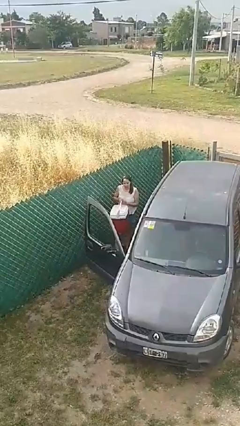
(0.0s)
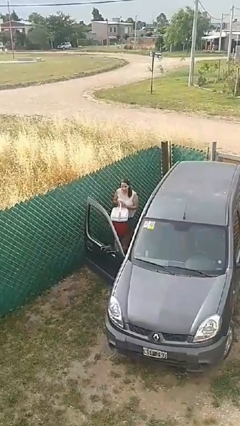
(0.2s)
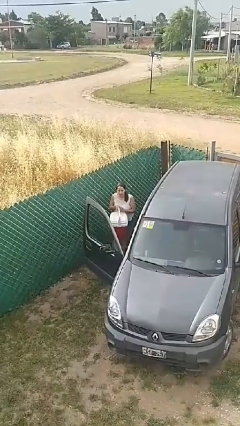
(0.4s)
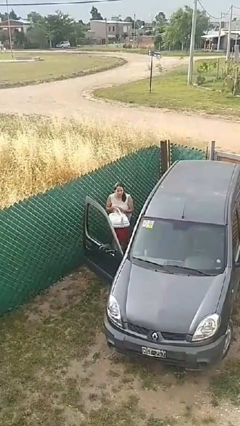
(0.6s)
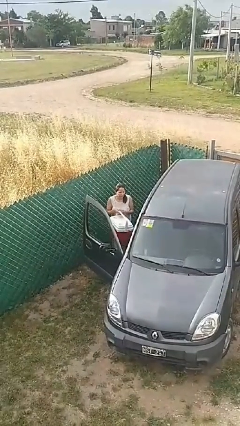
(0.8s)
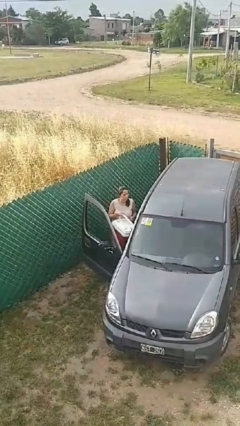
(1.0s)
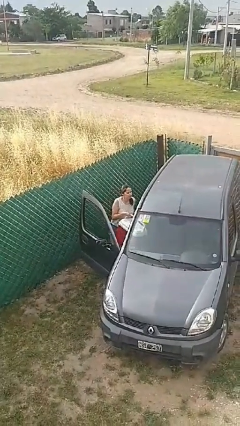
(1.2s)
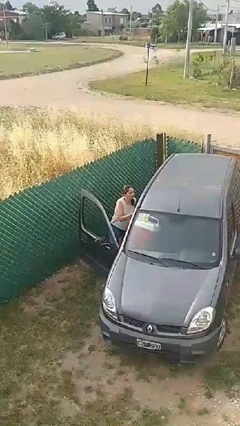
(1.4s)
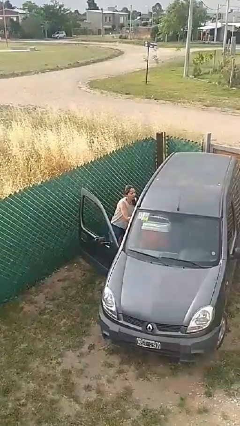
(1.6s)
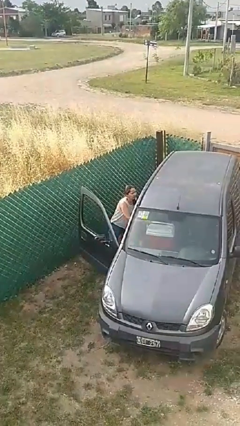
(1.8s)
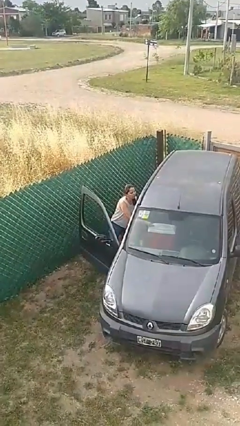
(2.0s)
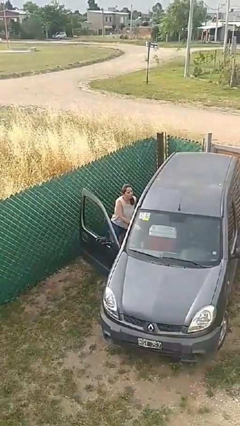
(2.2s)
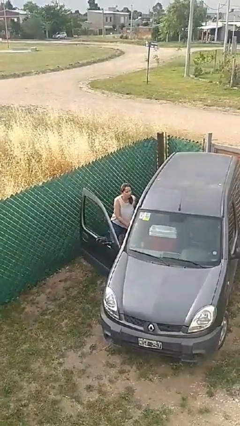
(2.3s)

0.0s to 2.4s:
person loads car

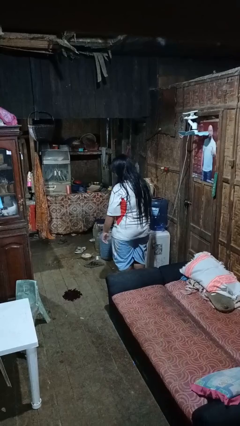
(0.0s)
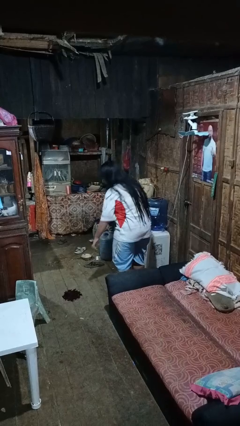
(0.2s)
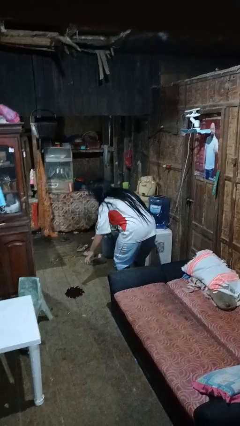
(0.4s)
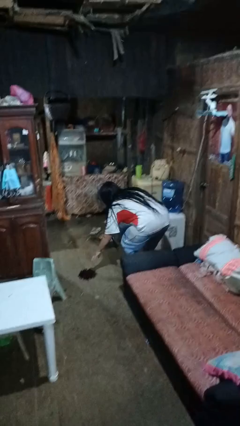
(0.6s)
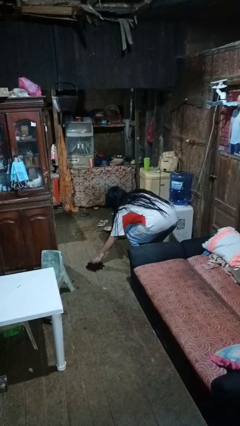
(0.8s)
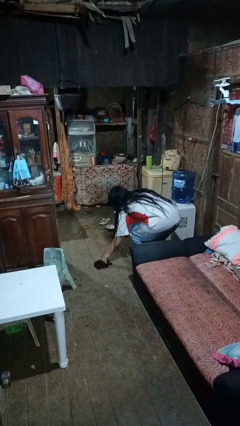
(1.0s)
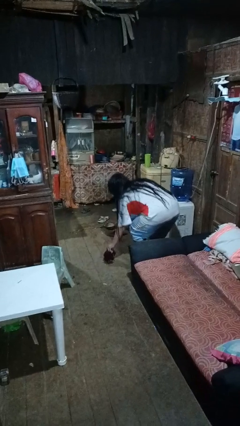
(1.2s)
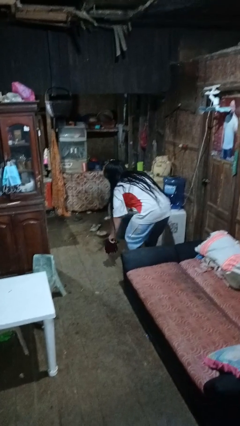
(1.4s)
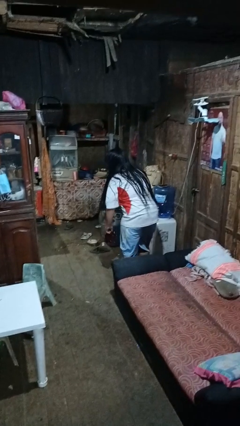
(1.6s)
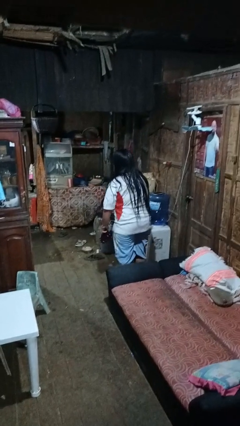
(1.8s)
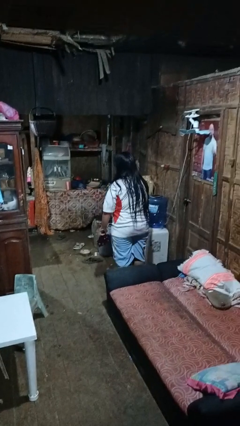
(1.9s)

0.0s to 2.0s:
person picks up object from floor

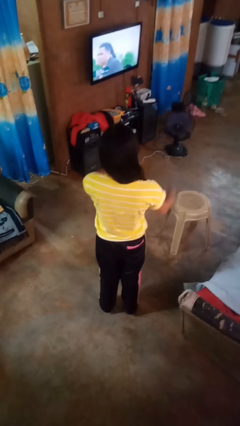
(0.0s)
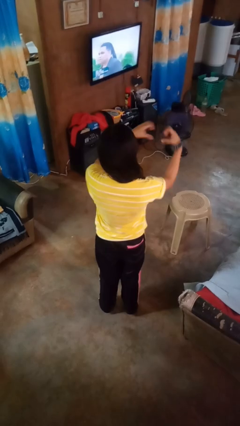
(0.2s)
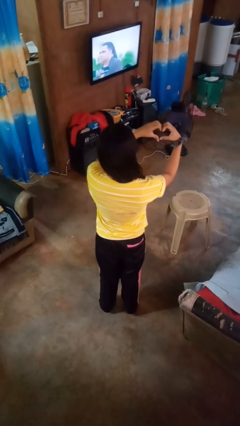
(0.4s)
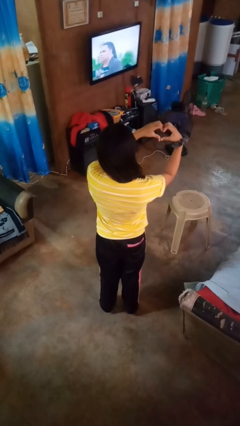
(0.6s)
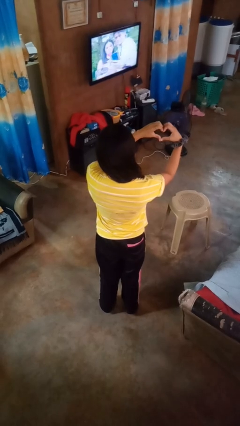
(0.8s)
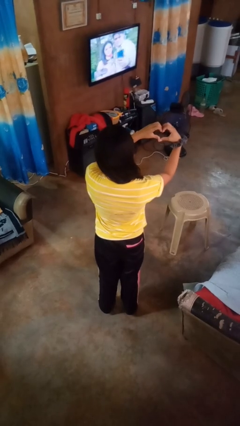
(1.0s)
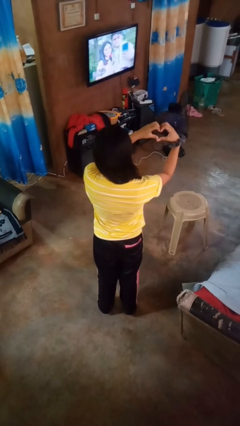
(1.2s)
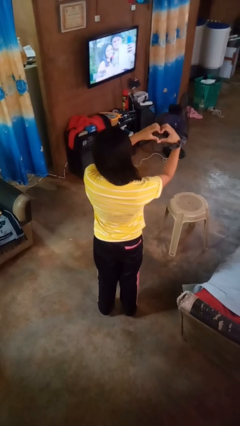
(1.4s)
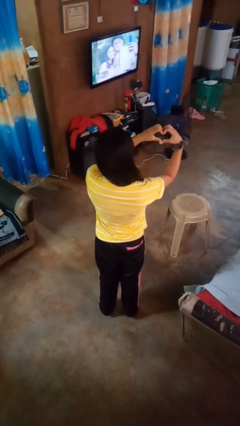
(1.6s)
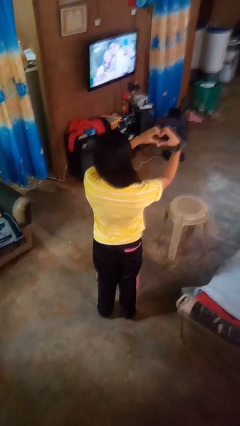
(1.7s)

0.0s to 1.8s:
person gestures heart

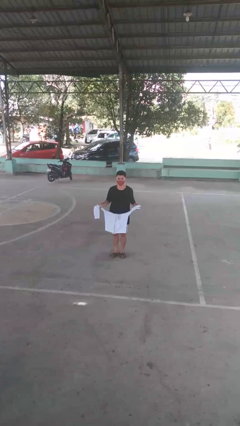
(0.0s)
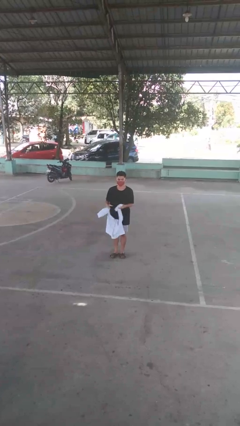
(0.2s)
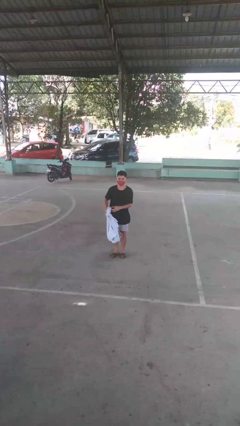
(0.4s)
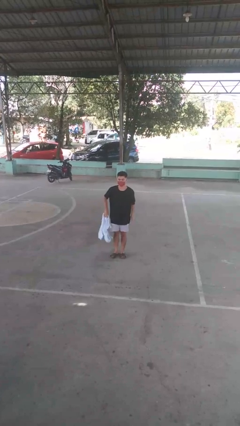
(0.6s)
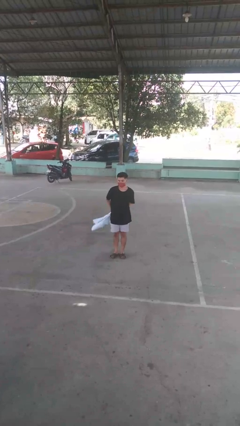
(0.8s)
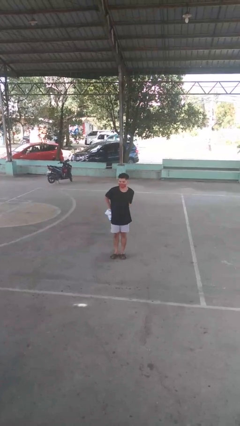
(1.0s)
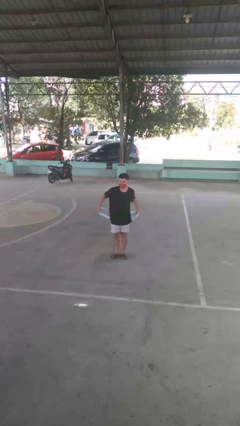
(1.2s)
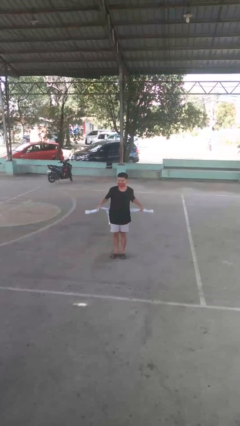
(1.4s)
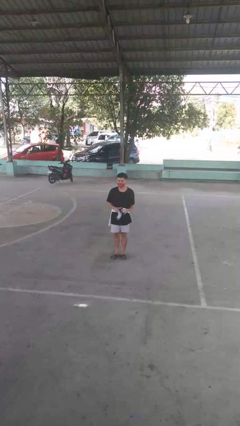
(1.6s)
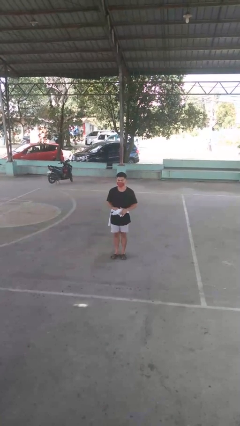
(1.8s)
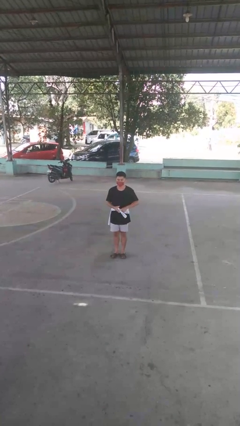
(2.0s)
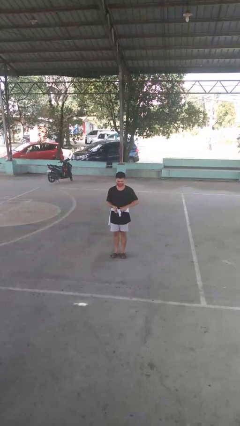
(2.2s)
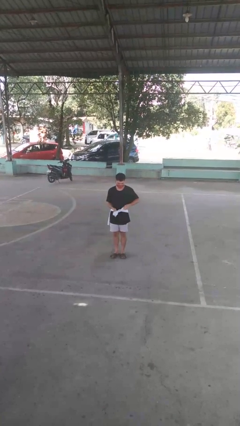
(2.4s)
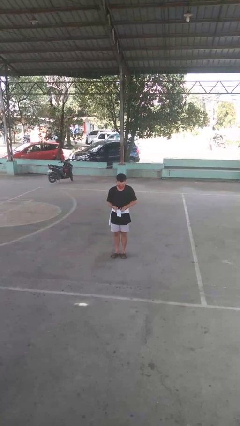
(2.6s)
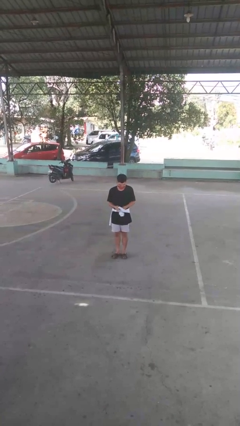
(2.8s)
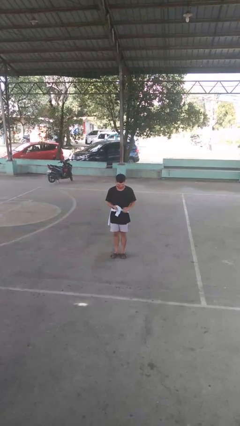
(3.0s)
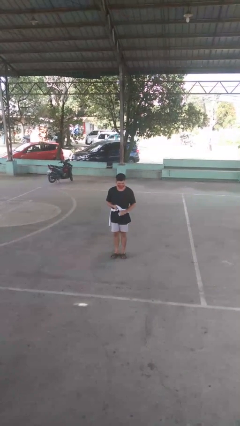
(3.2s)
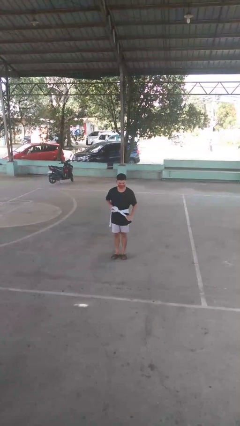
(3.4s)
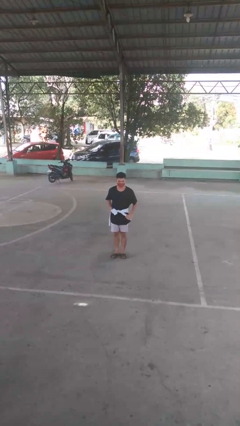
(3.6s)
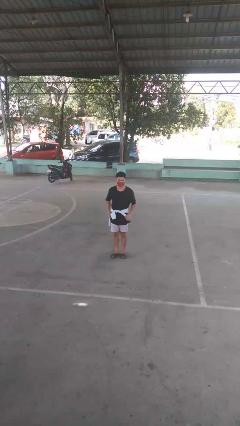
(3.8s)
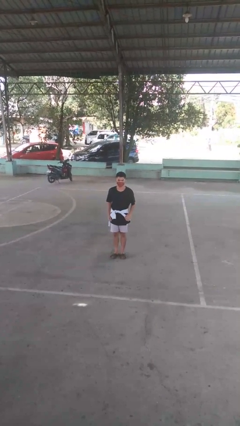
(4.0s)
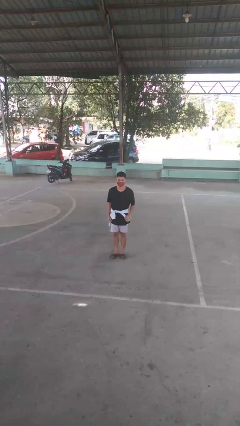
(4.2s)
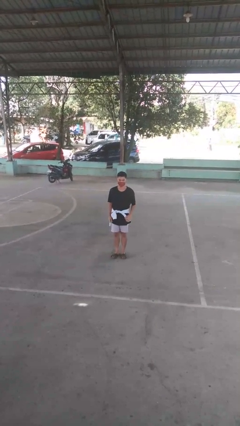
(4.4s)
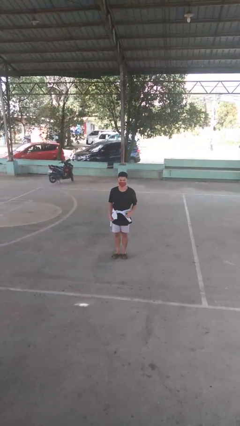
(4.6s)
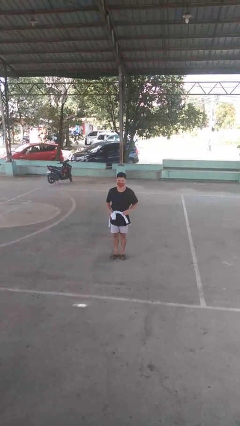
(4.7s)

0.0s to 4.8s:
person ties jacket around waist

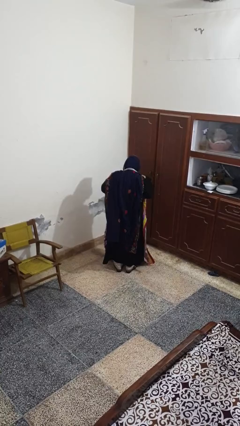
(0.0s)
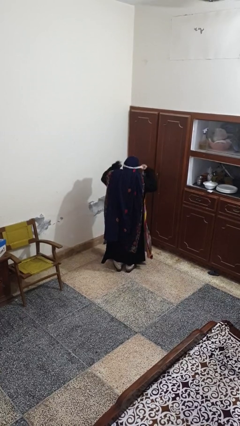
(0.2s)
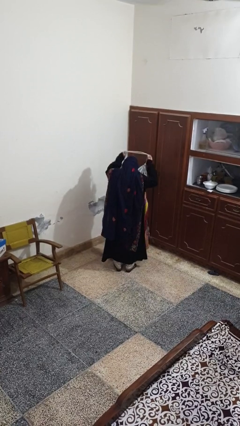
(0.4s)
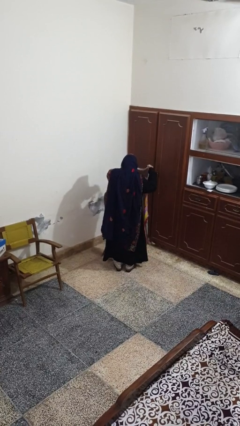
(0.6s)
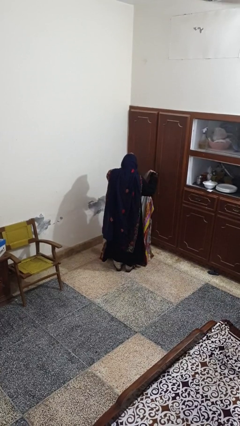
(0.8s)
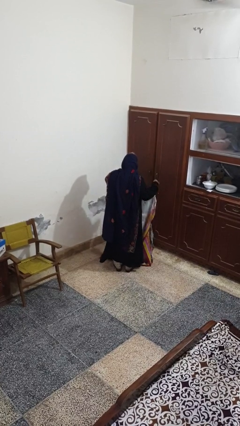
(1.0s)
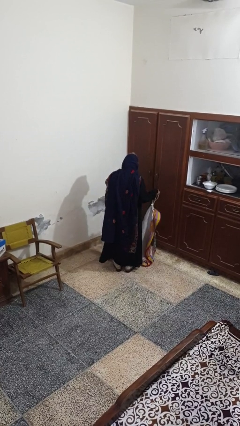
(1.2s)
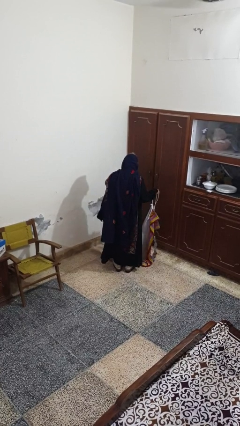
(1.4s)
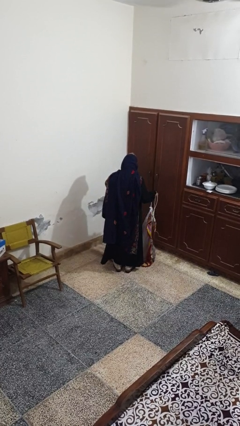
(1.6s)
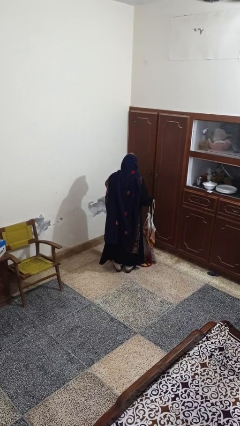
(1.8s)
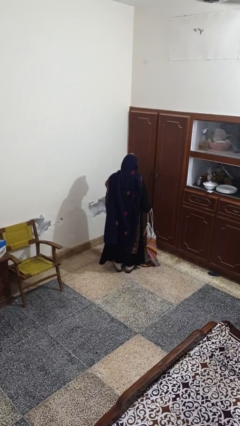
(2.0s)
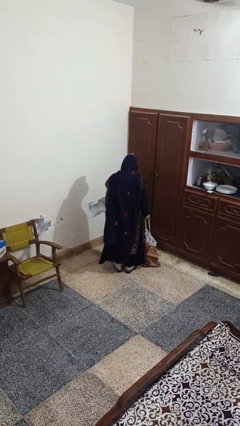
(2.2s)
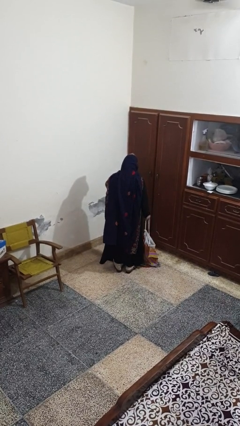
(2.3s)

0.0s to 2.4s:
person takes off apron

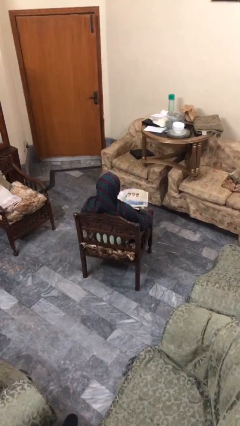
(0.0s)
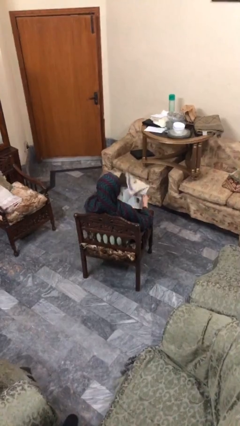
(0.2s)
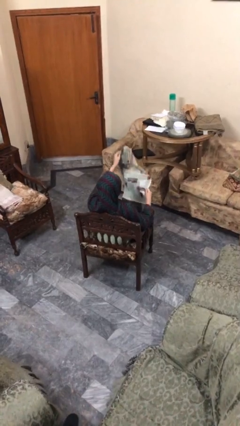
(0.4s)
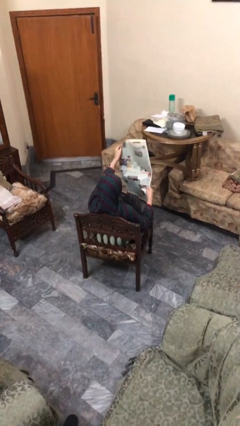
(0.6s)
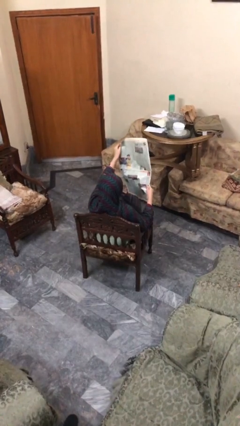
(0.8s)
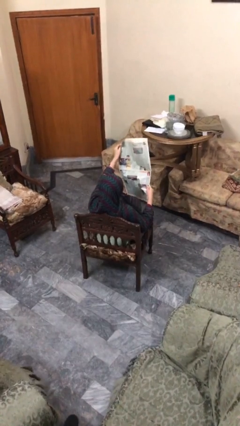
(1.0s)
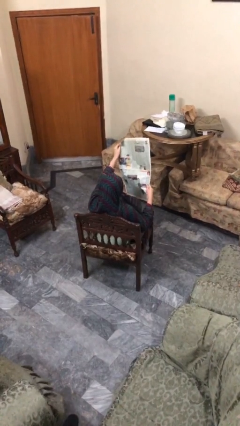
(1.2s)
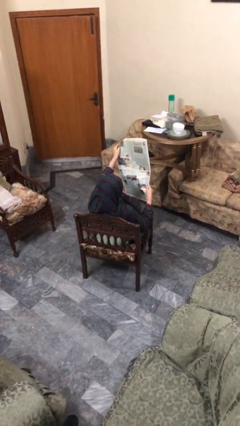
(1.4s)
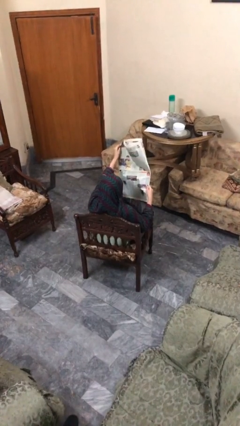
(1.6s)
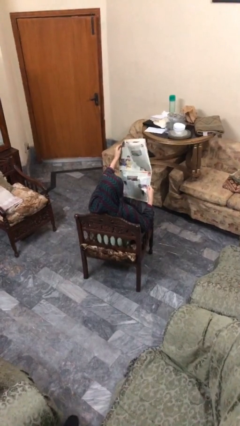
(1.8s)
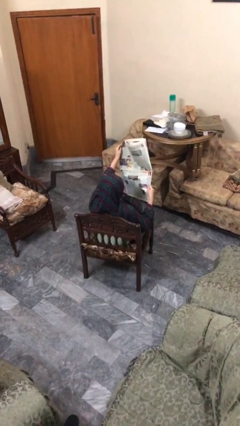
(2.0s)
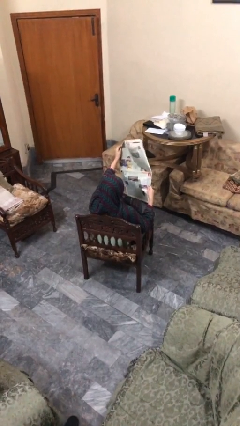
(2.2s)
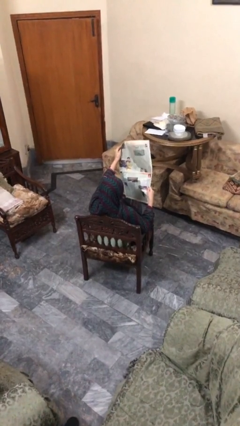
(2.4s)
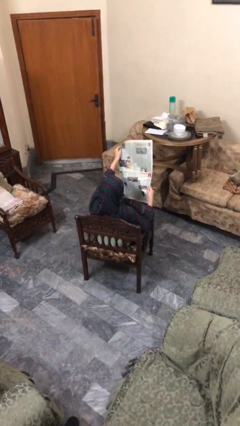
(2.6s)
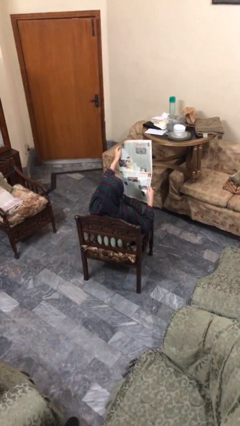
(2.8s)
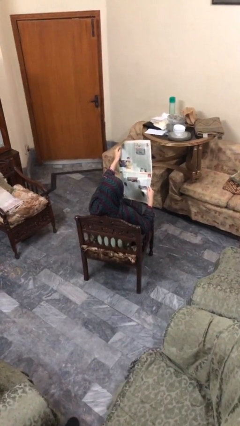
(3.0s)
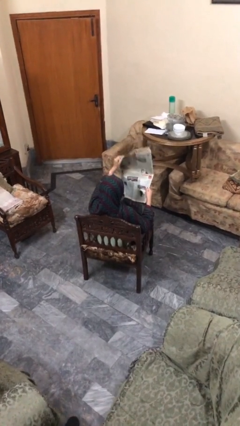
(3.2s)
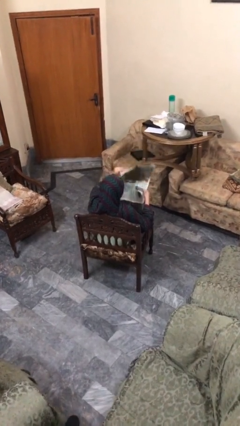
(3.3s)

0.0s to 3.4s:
person reads newspaper

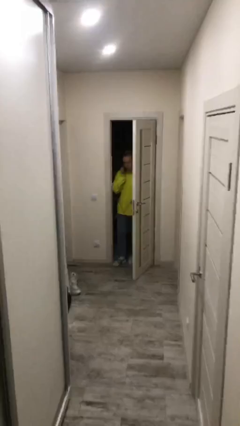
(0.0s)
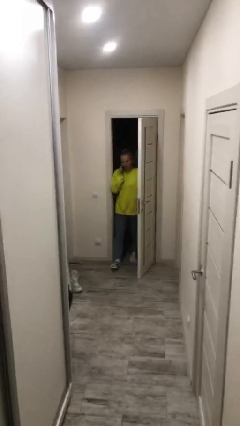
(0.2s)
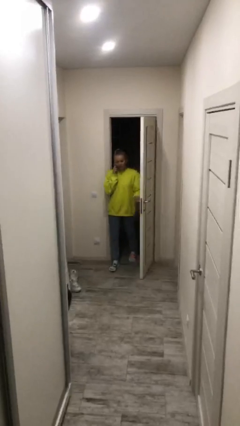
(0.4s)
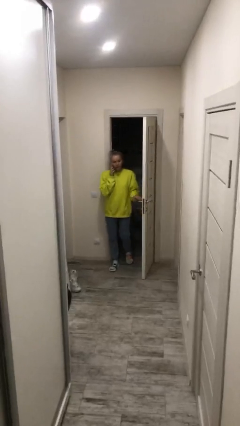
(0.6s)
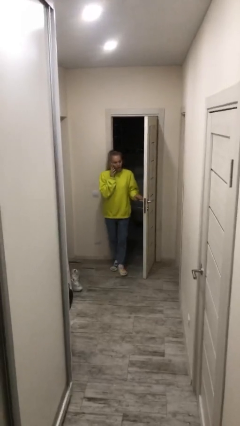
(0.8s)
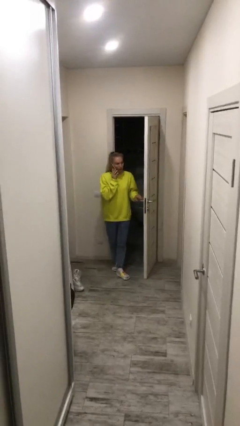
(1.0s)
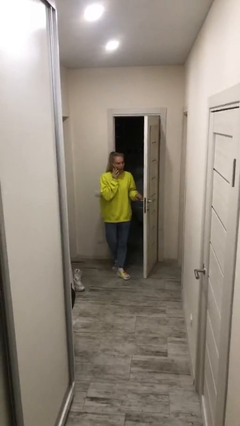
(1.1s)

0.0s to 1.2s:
person enters scene through structure
